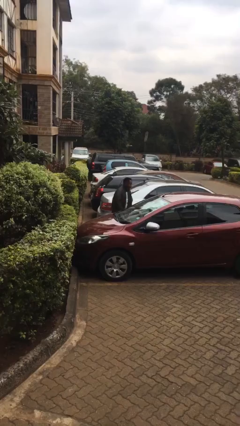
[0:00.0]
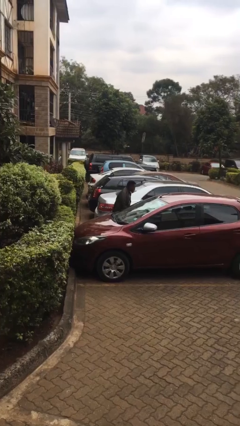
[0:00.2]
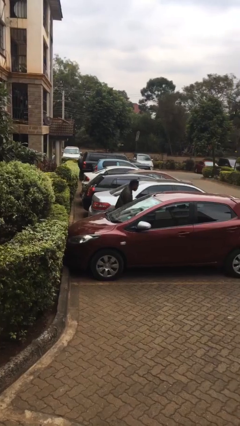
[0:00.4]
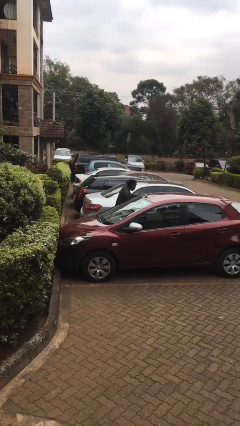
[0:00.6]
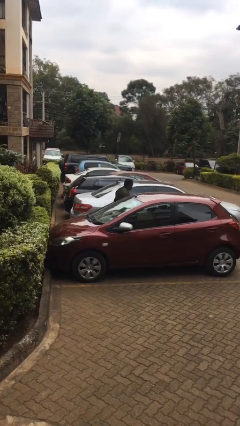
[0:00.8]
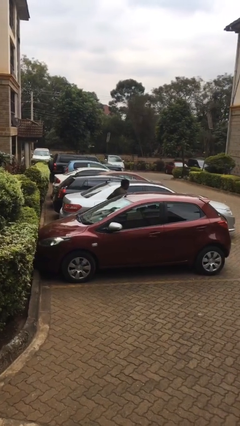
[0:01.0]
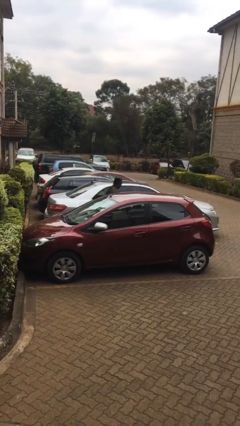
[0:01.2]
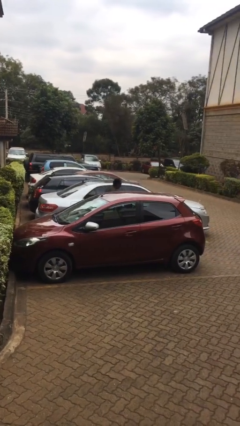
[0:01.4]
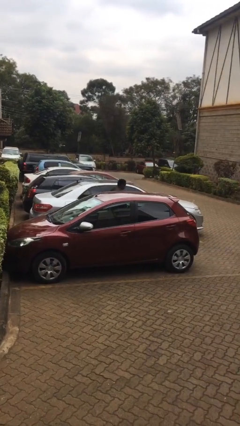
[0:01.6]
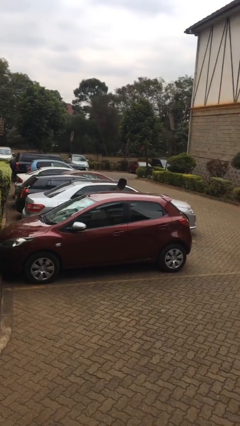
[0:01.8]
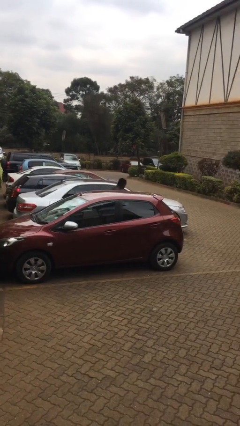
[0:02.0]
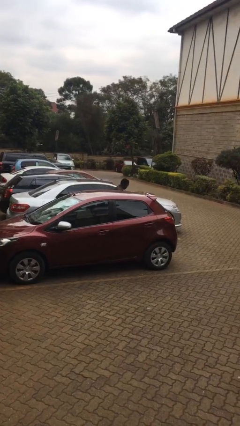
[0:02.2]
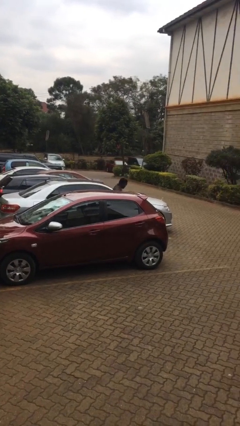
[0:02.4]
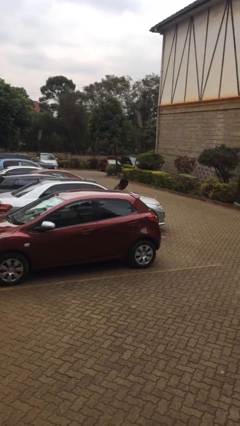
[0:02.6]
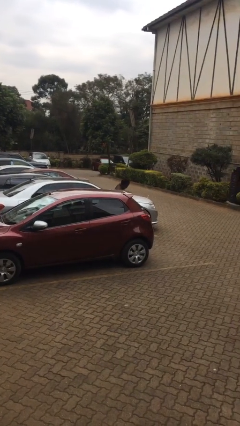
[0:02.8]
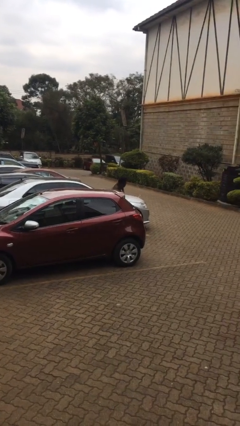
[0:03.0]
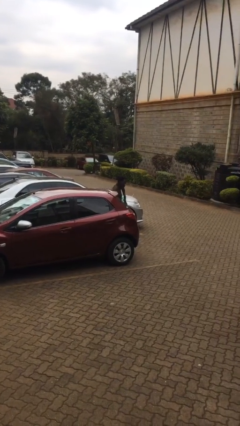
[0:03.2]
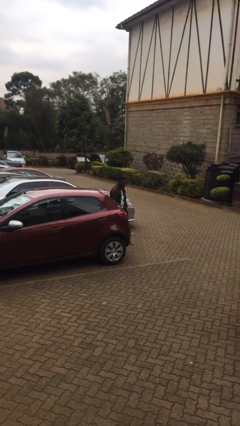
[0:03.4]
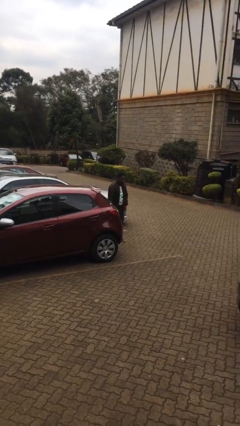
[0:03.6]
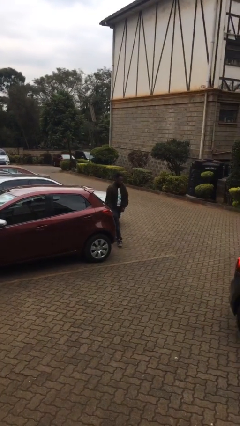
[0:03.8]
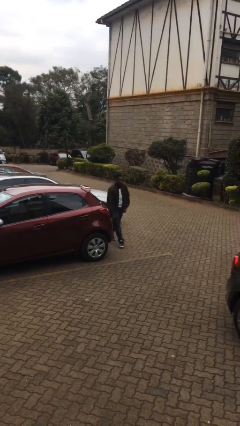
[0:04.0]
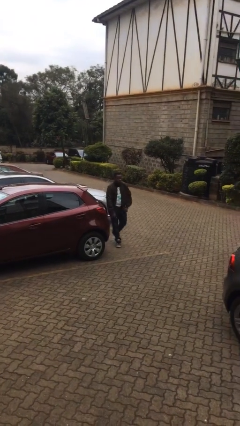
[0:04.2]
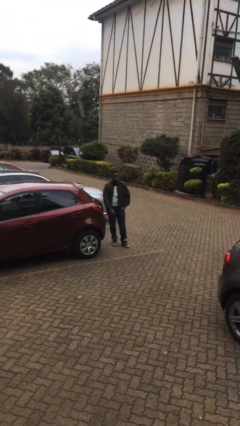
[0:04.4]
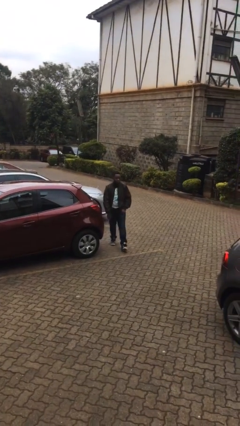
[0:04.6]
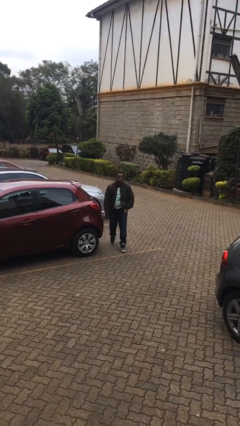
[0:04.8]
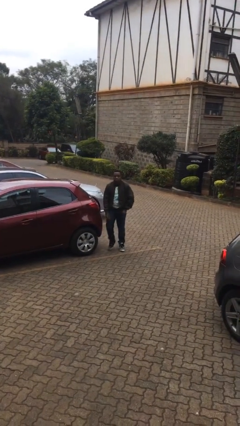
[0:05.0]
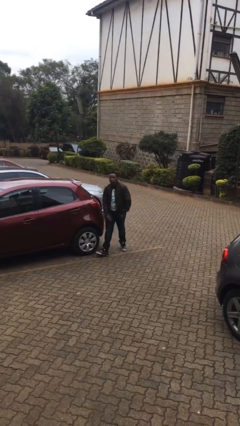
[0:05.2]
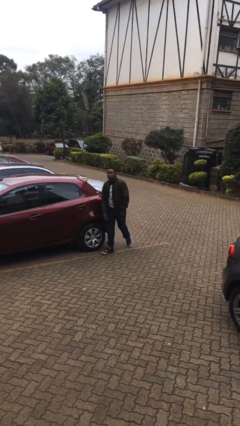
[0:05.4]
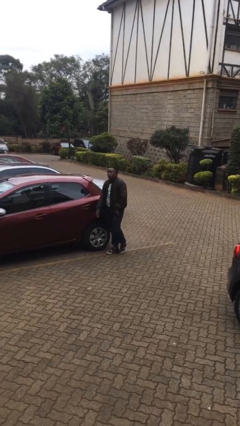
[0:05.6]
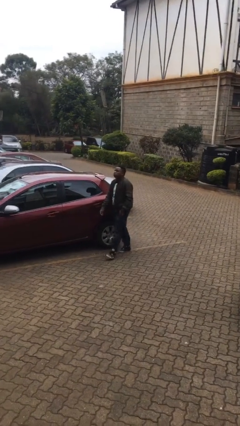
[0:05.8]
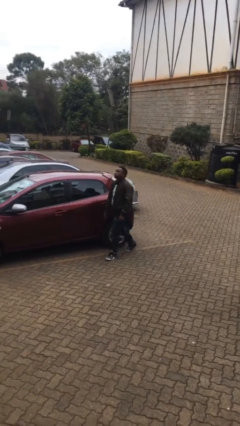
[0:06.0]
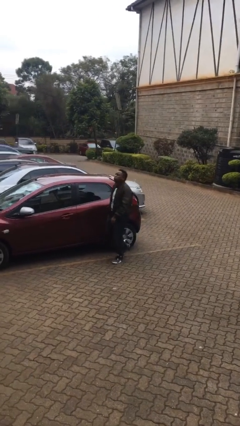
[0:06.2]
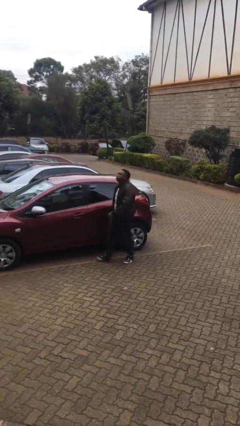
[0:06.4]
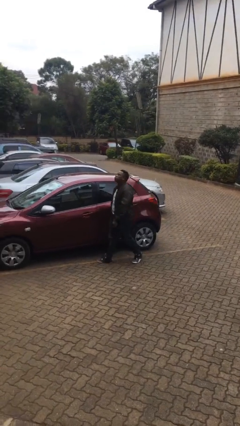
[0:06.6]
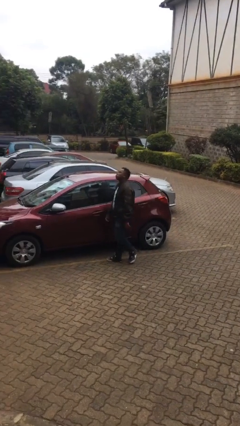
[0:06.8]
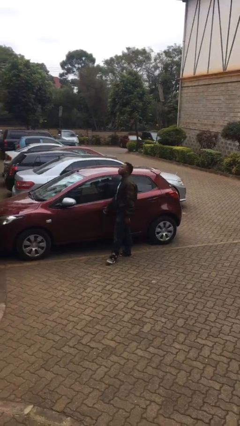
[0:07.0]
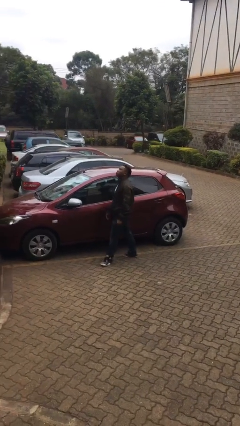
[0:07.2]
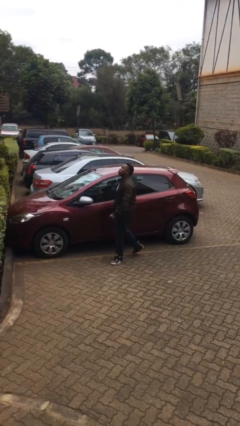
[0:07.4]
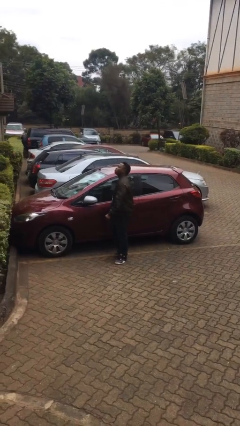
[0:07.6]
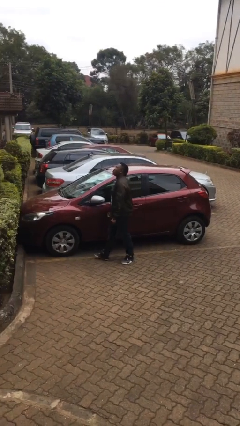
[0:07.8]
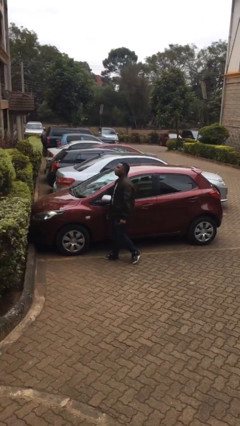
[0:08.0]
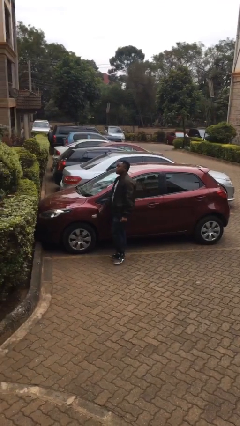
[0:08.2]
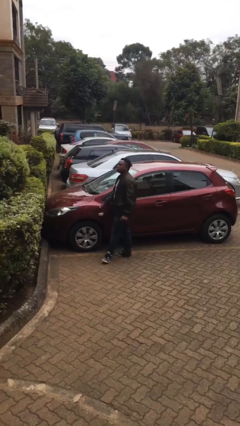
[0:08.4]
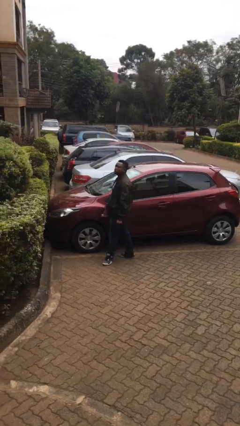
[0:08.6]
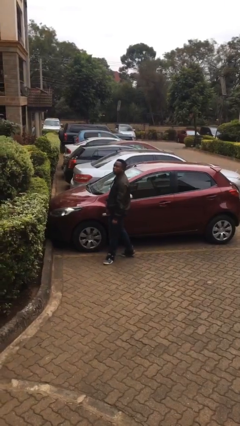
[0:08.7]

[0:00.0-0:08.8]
person walks around car

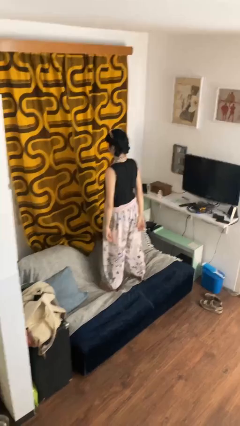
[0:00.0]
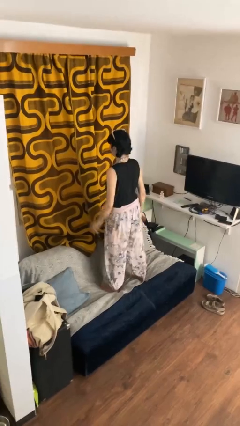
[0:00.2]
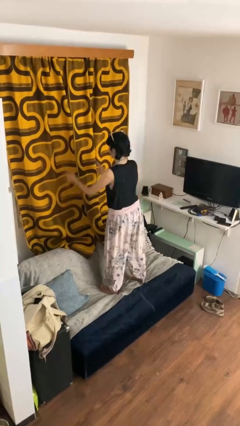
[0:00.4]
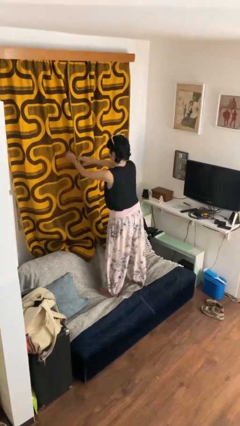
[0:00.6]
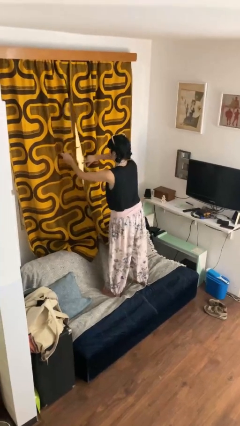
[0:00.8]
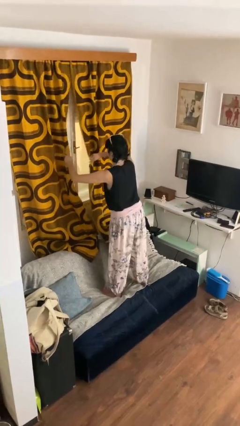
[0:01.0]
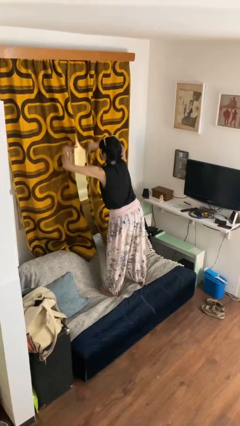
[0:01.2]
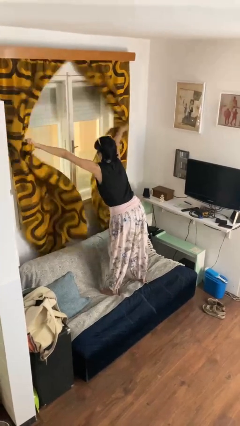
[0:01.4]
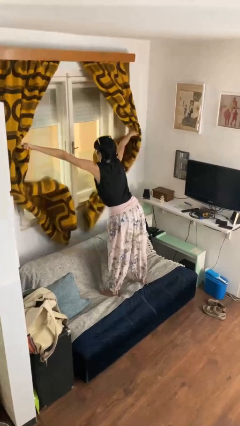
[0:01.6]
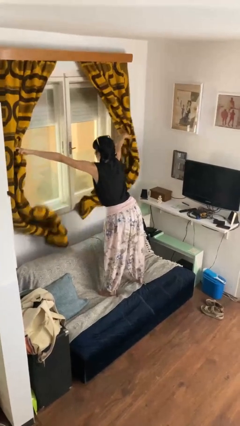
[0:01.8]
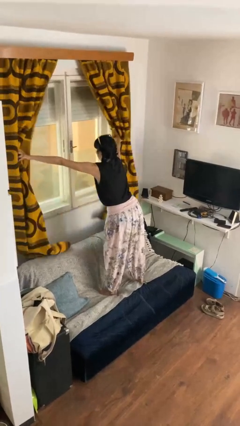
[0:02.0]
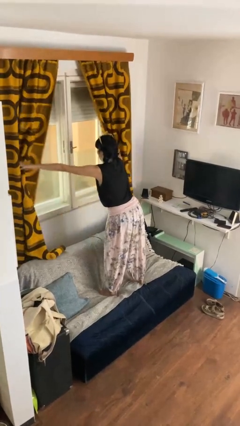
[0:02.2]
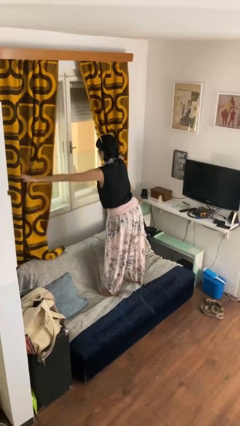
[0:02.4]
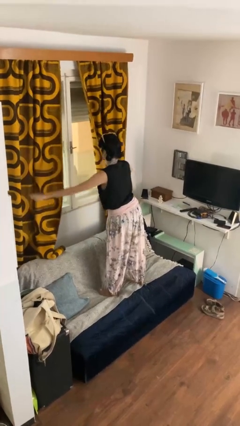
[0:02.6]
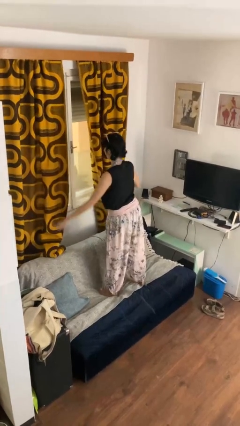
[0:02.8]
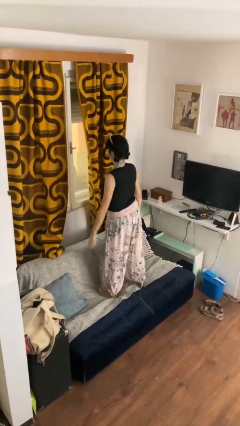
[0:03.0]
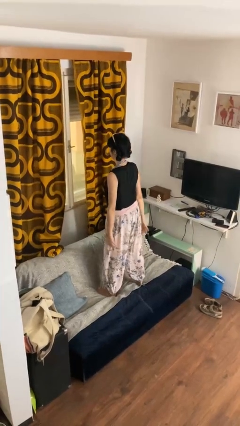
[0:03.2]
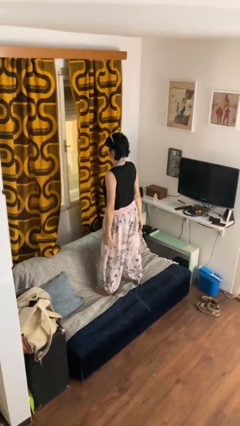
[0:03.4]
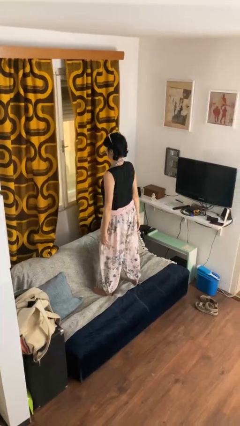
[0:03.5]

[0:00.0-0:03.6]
person opens curtains

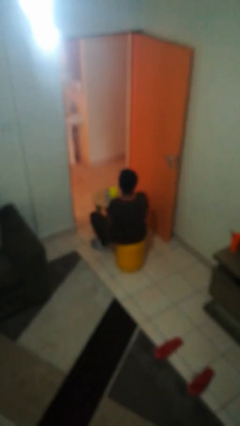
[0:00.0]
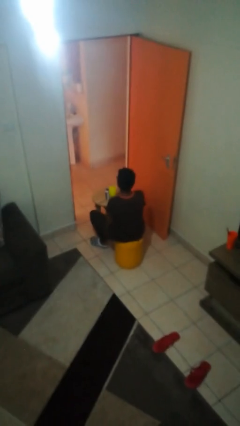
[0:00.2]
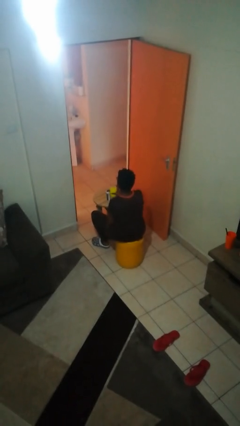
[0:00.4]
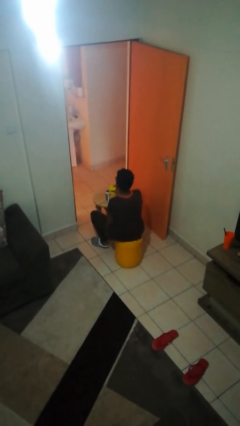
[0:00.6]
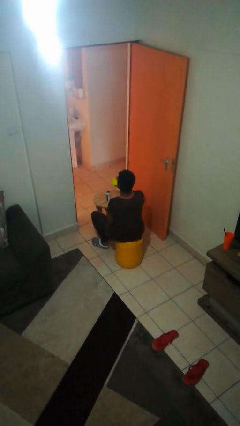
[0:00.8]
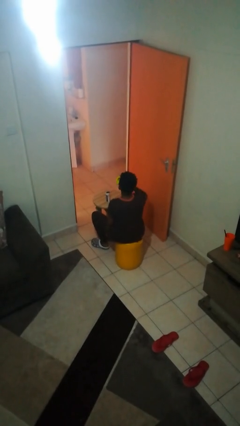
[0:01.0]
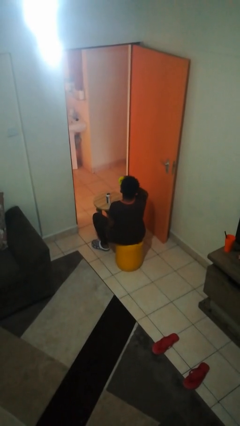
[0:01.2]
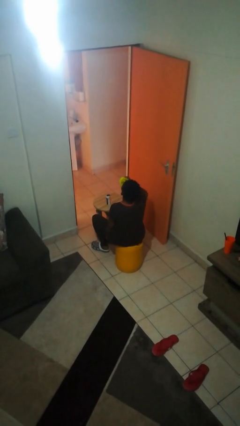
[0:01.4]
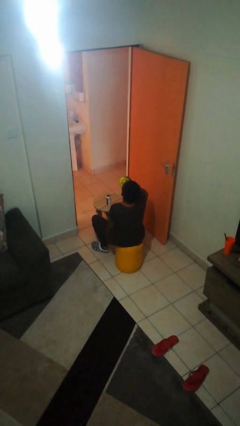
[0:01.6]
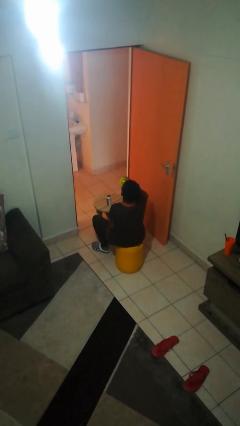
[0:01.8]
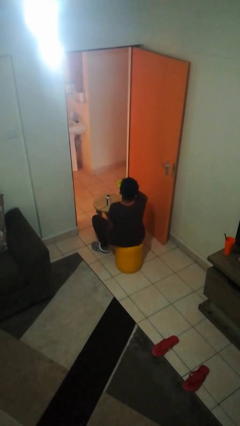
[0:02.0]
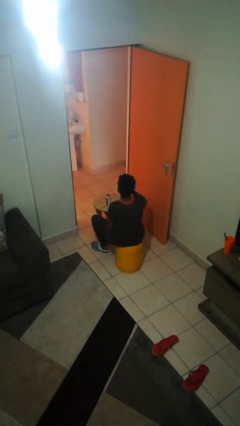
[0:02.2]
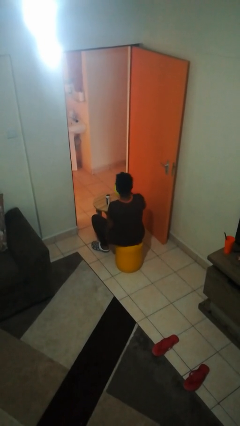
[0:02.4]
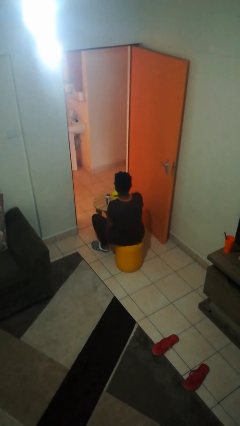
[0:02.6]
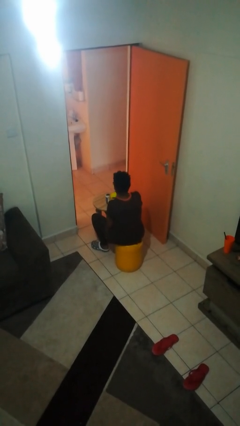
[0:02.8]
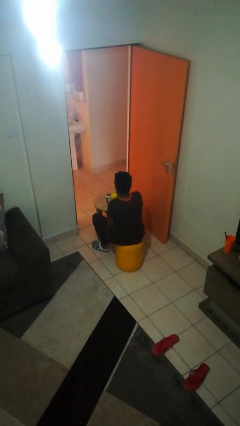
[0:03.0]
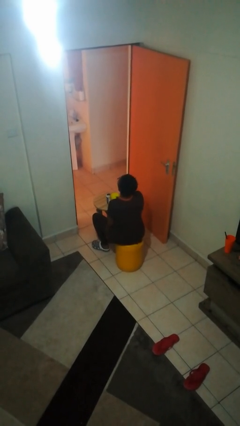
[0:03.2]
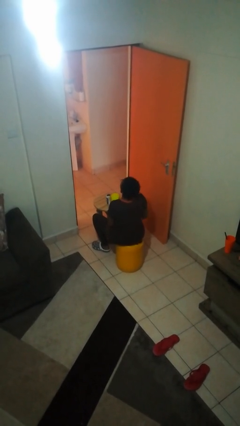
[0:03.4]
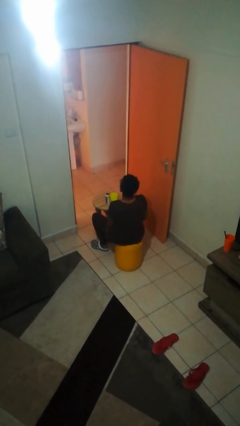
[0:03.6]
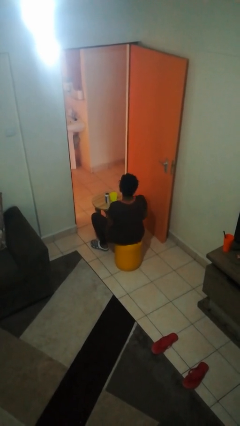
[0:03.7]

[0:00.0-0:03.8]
person drinks from cup

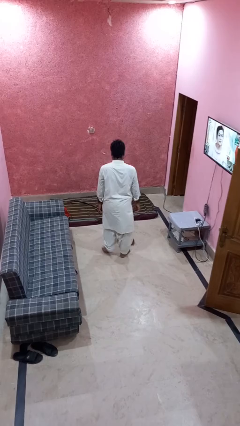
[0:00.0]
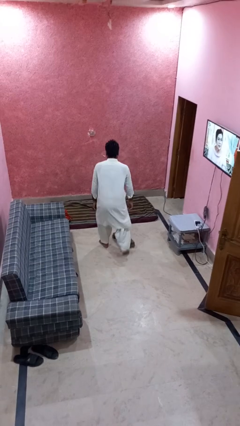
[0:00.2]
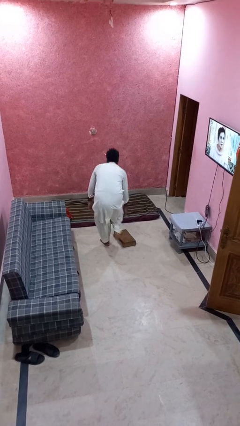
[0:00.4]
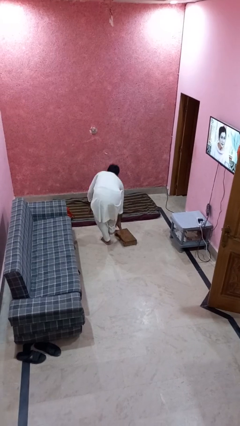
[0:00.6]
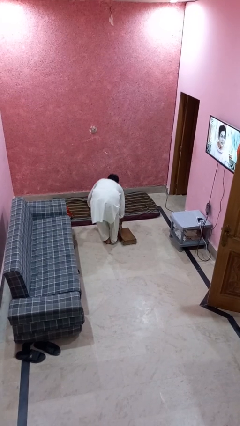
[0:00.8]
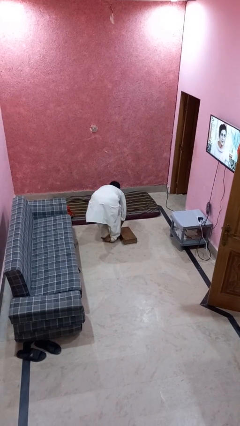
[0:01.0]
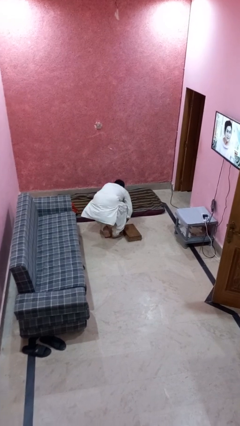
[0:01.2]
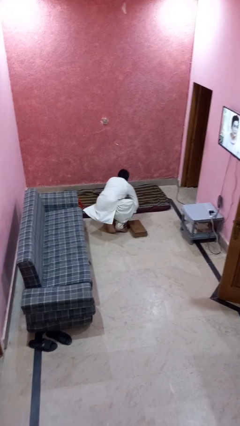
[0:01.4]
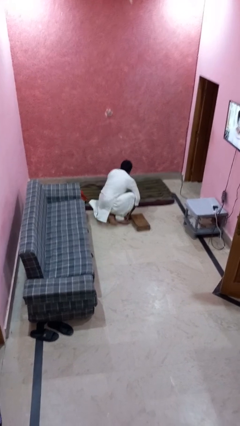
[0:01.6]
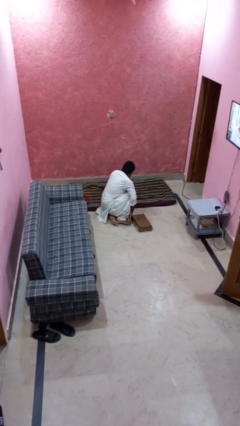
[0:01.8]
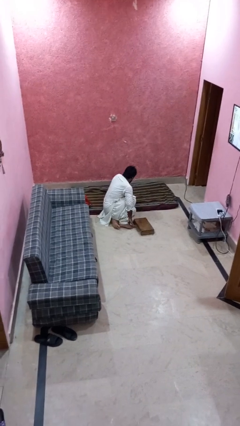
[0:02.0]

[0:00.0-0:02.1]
person trips on object on floor
